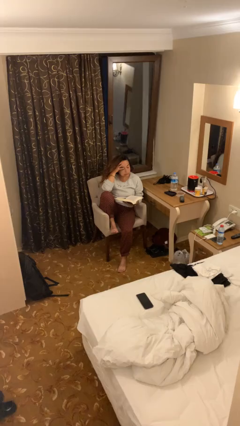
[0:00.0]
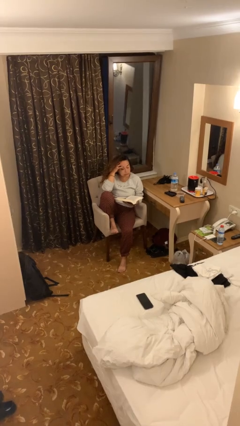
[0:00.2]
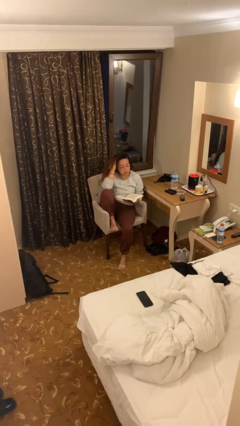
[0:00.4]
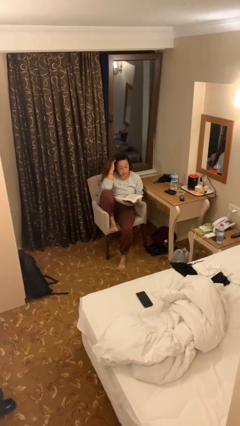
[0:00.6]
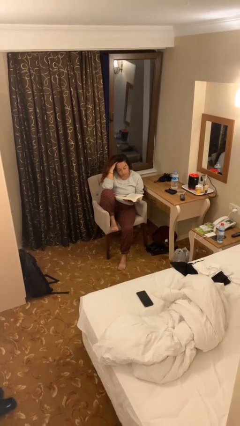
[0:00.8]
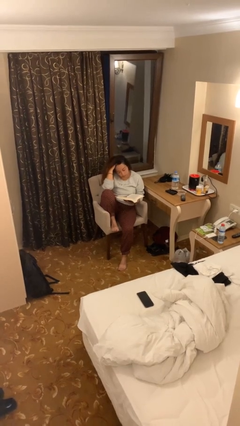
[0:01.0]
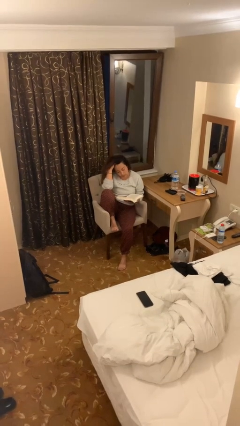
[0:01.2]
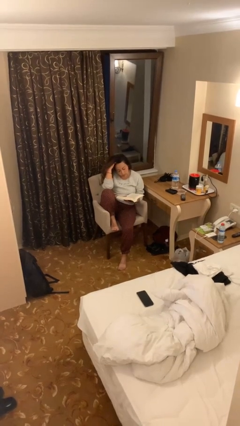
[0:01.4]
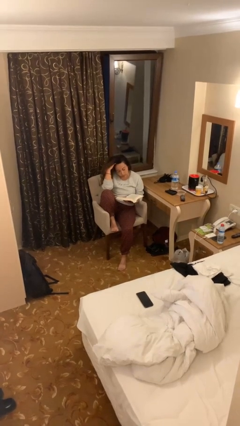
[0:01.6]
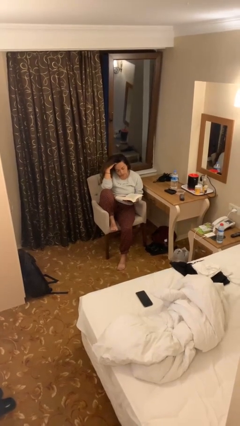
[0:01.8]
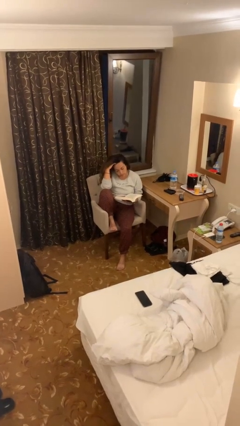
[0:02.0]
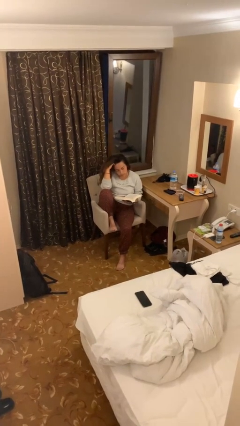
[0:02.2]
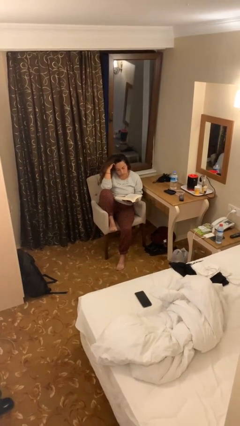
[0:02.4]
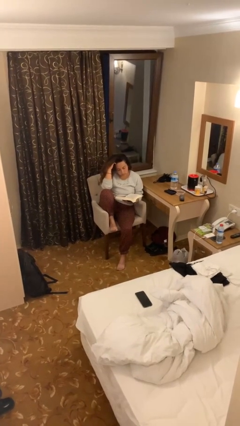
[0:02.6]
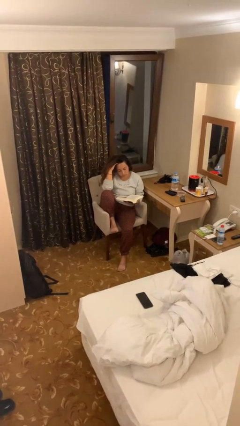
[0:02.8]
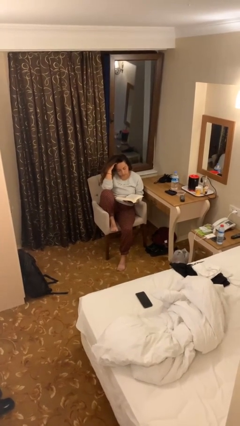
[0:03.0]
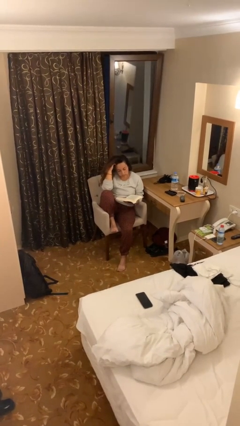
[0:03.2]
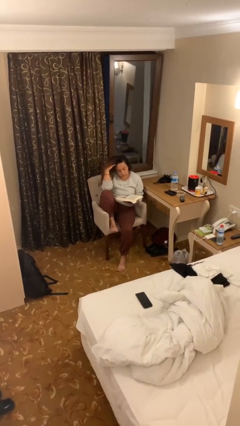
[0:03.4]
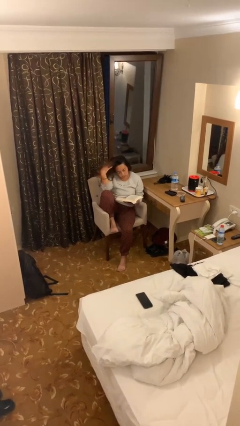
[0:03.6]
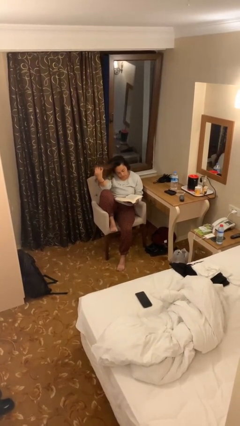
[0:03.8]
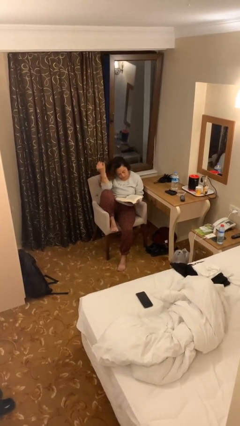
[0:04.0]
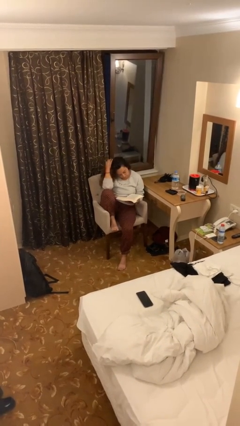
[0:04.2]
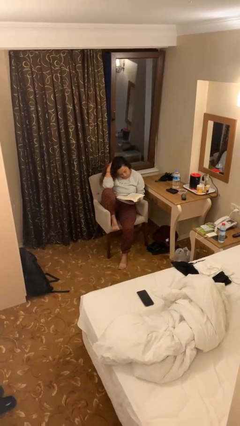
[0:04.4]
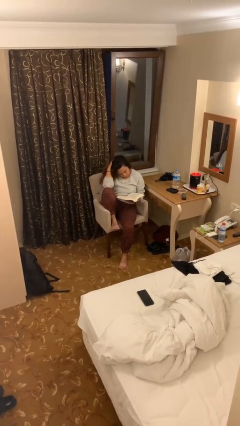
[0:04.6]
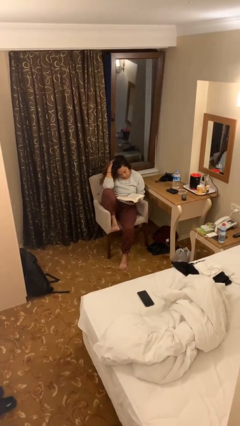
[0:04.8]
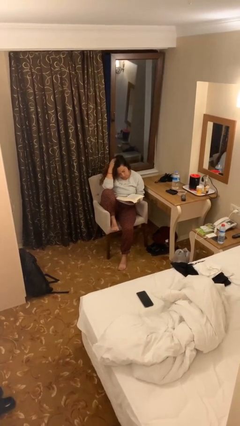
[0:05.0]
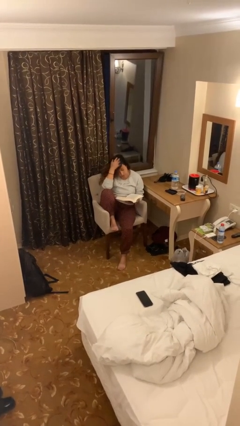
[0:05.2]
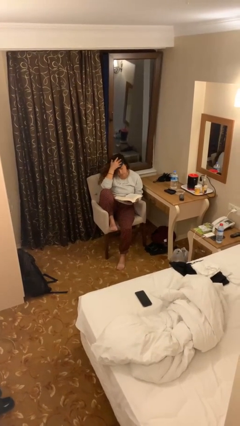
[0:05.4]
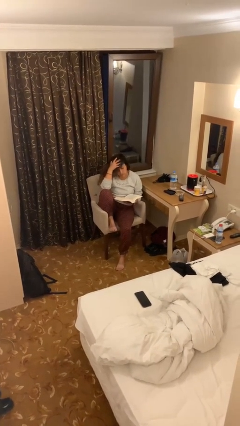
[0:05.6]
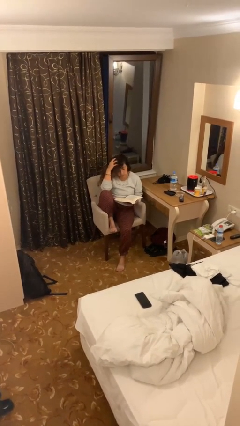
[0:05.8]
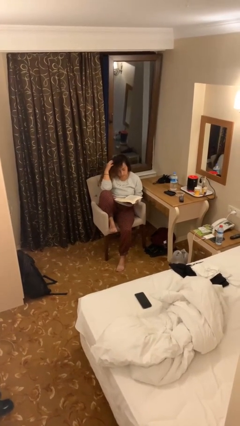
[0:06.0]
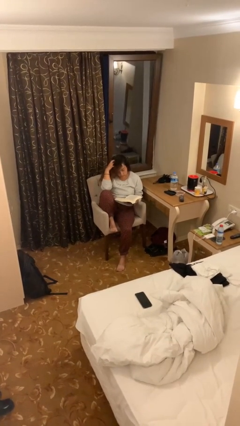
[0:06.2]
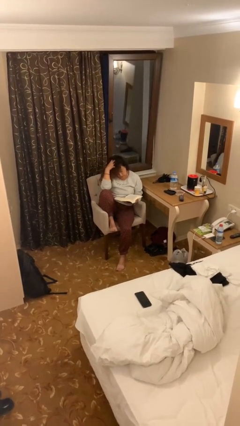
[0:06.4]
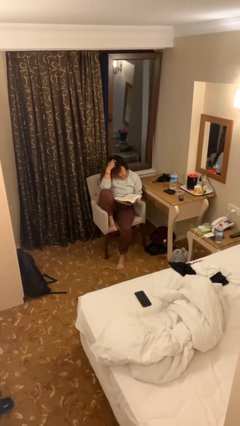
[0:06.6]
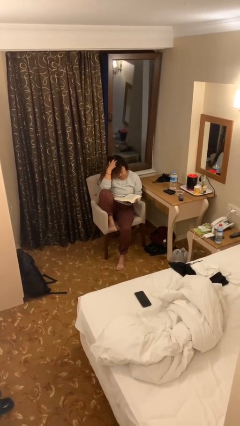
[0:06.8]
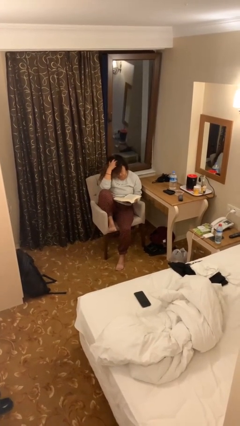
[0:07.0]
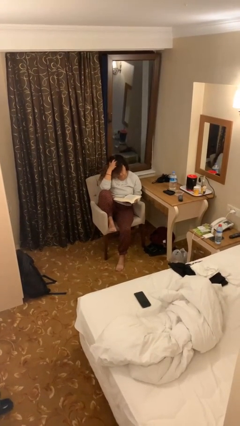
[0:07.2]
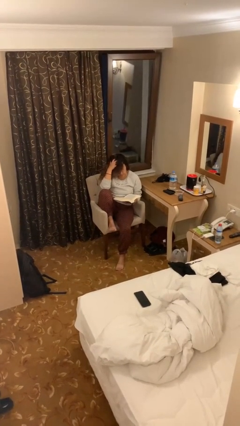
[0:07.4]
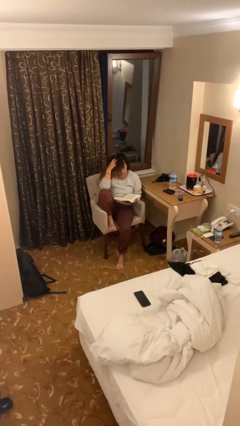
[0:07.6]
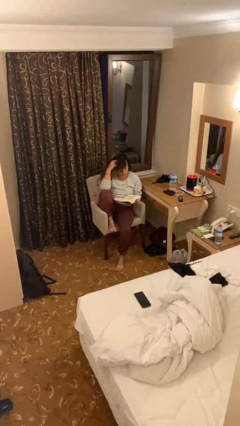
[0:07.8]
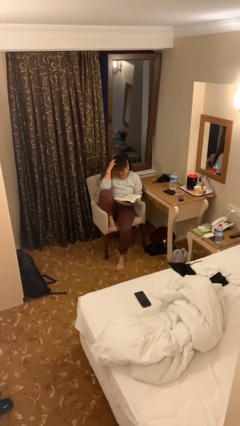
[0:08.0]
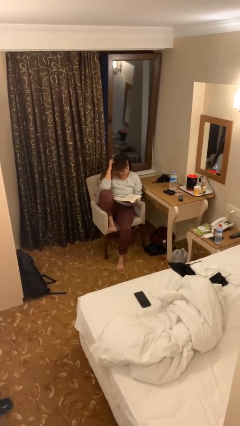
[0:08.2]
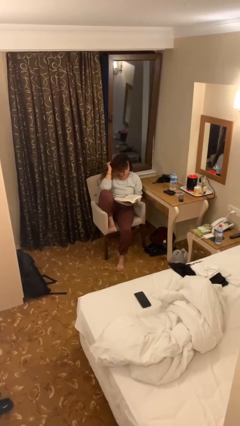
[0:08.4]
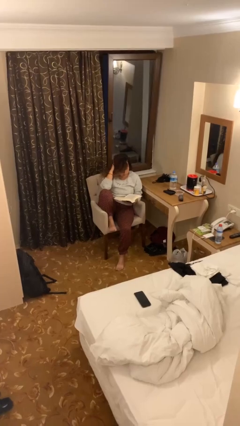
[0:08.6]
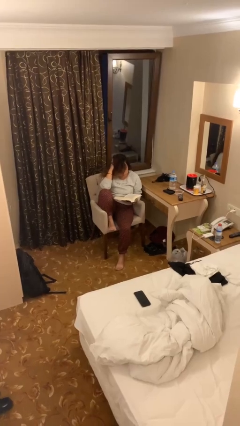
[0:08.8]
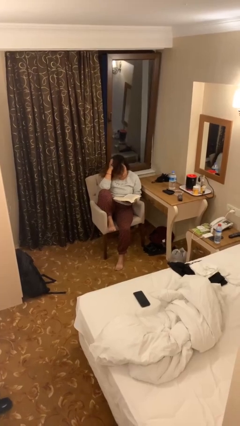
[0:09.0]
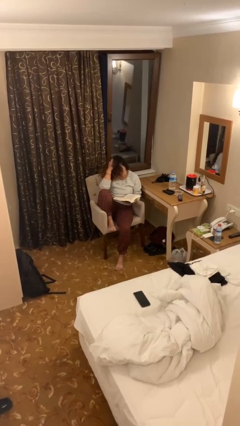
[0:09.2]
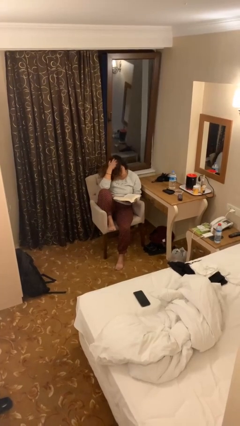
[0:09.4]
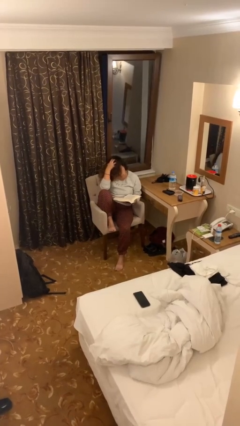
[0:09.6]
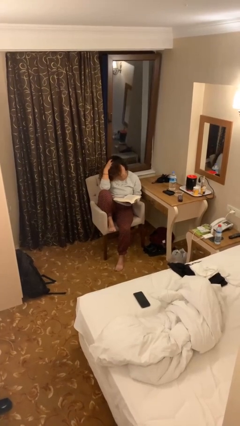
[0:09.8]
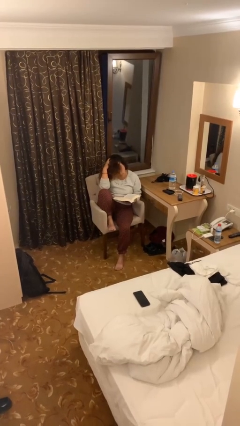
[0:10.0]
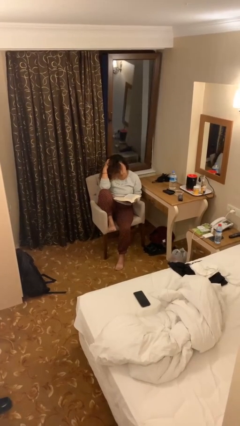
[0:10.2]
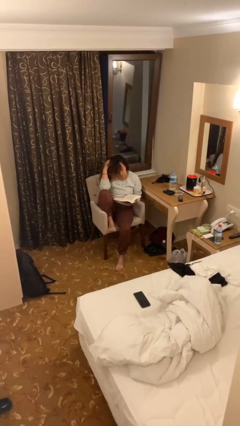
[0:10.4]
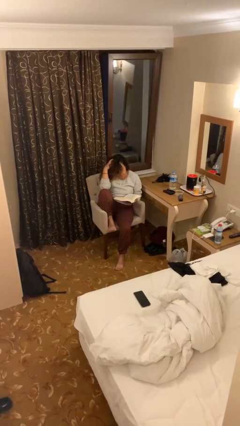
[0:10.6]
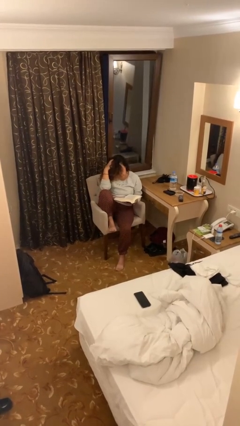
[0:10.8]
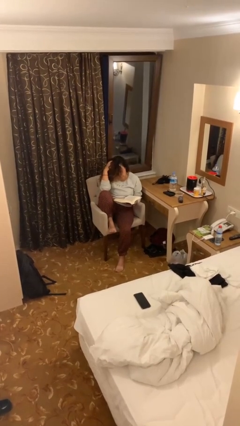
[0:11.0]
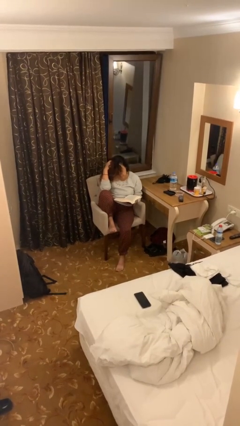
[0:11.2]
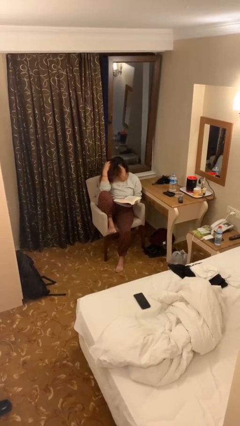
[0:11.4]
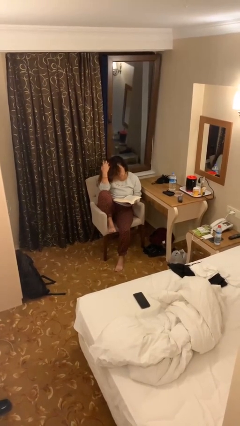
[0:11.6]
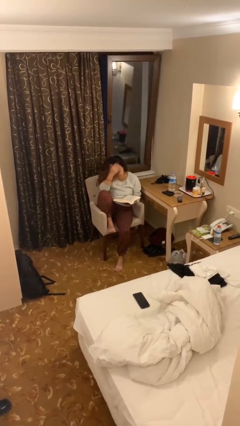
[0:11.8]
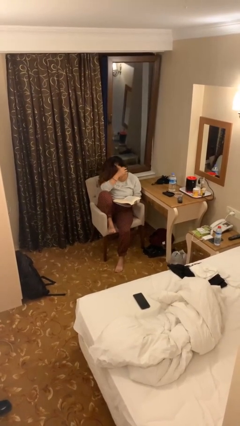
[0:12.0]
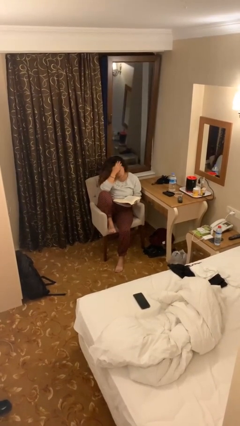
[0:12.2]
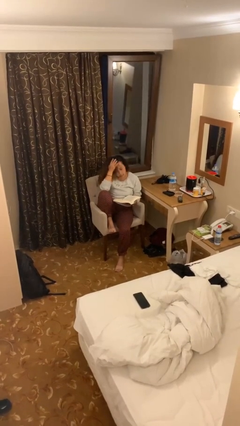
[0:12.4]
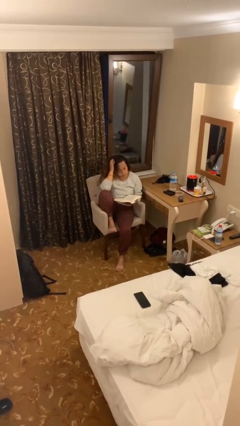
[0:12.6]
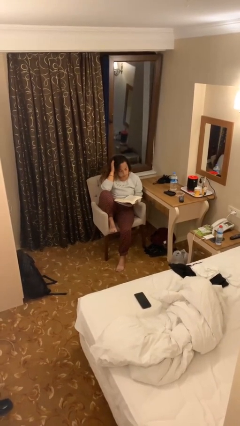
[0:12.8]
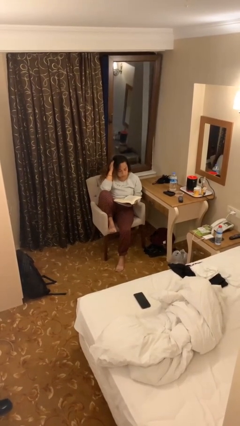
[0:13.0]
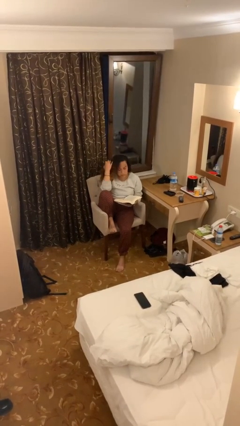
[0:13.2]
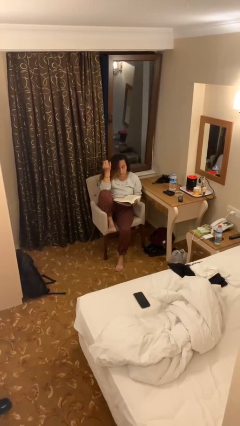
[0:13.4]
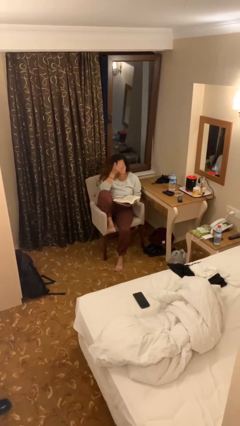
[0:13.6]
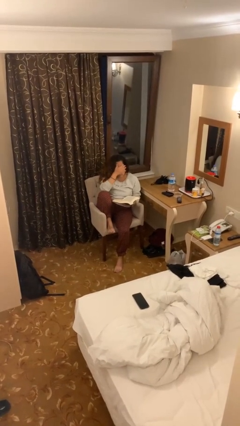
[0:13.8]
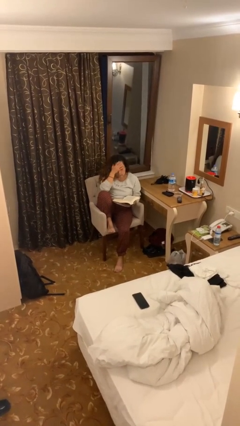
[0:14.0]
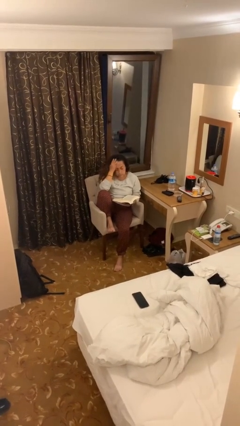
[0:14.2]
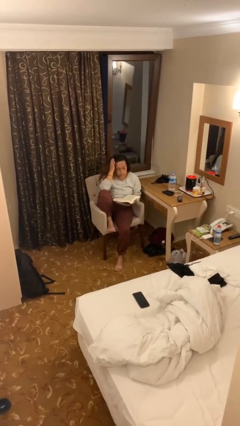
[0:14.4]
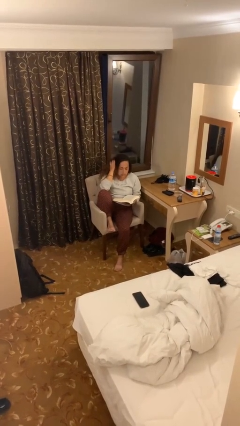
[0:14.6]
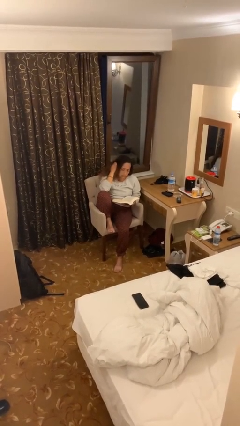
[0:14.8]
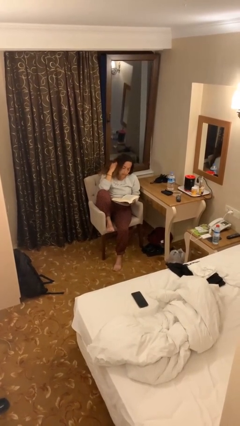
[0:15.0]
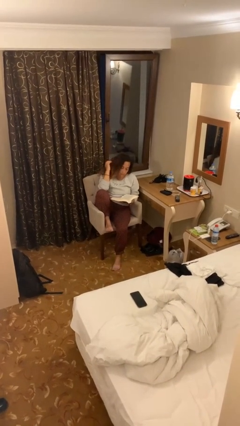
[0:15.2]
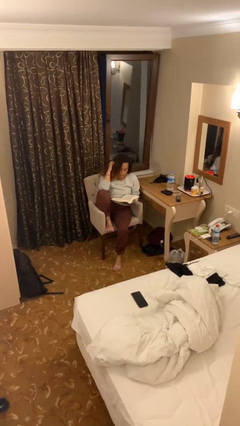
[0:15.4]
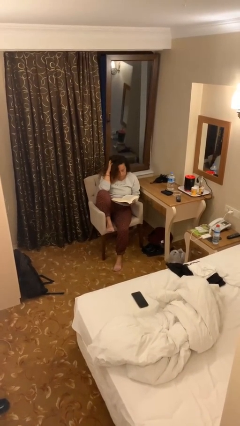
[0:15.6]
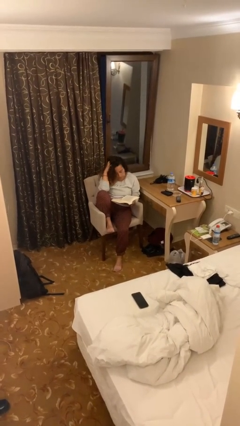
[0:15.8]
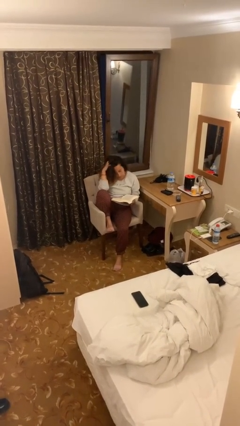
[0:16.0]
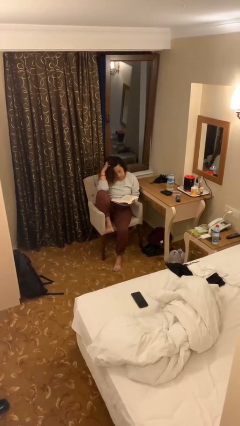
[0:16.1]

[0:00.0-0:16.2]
person reads document

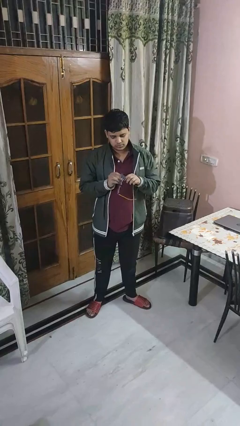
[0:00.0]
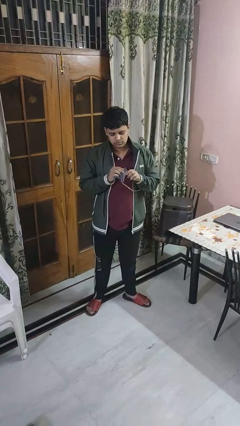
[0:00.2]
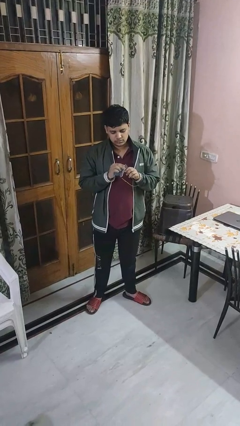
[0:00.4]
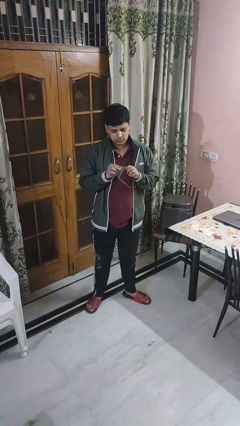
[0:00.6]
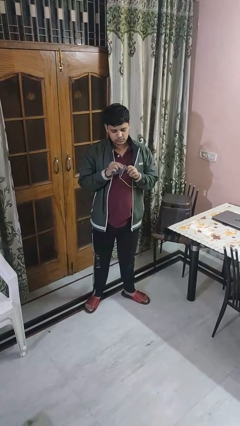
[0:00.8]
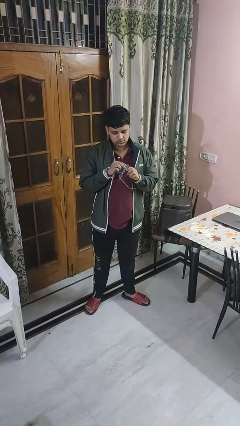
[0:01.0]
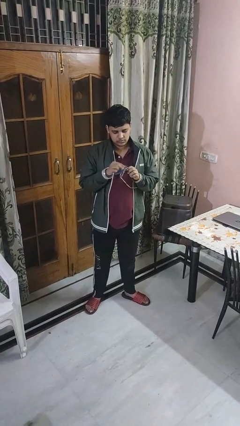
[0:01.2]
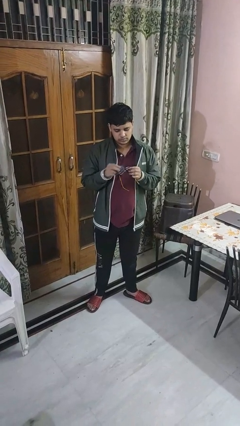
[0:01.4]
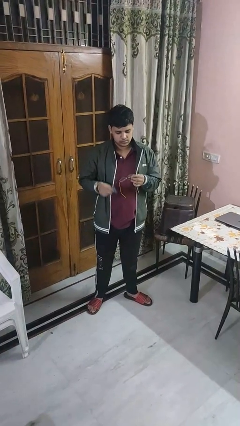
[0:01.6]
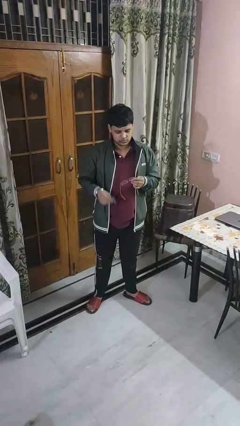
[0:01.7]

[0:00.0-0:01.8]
person cleans eyeglasses

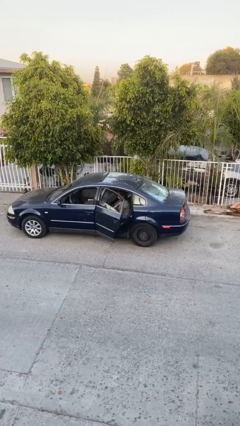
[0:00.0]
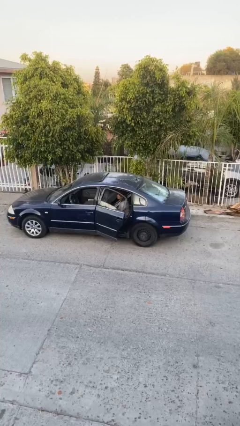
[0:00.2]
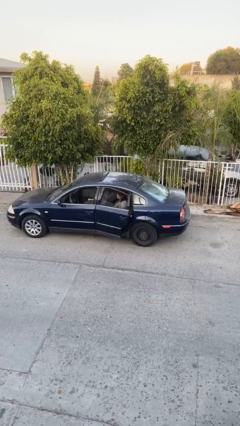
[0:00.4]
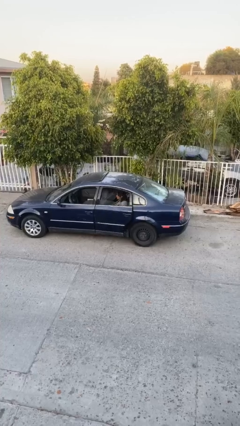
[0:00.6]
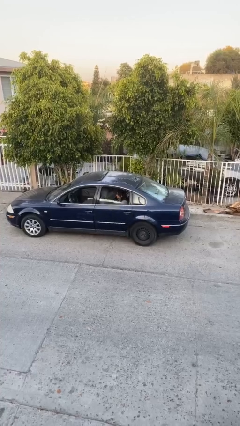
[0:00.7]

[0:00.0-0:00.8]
person closes car door
